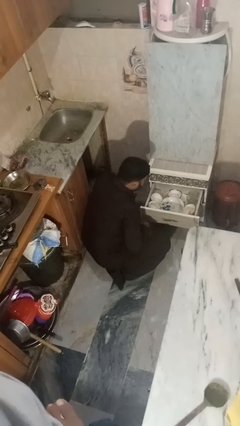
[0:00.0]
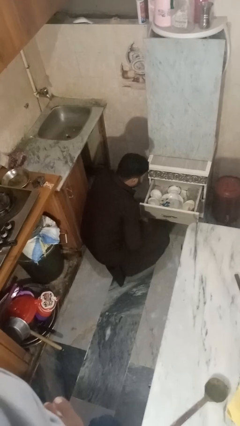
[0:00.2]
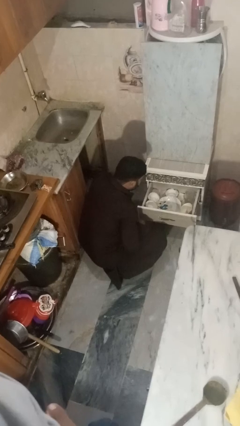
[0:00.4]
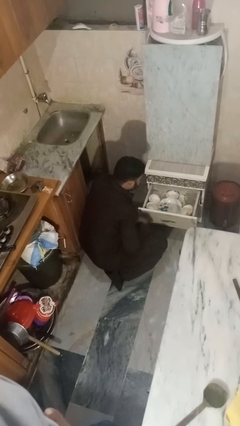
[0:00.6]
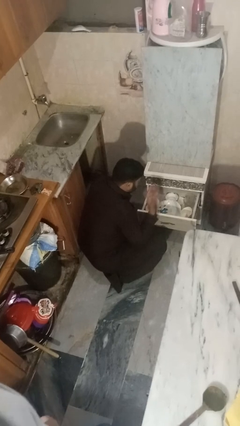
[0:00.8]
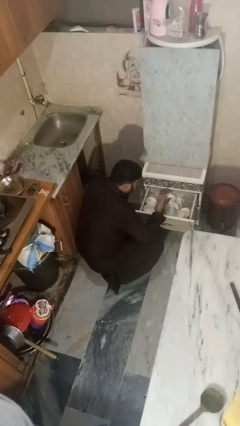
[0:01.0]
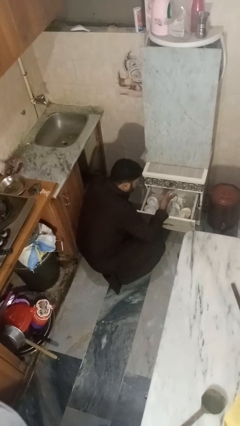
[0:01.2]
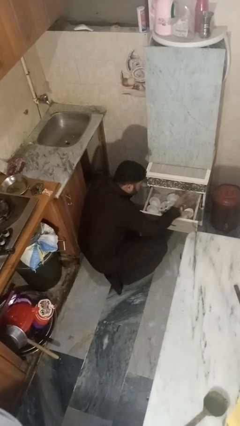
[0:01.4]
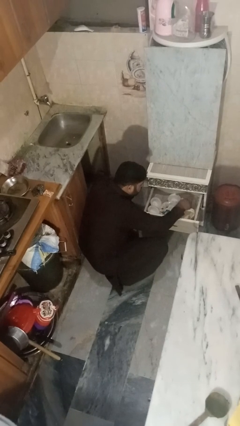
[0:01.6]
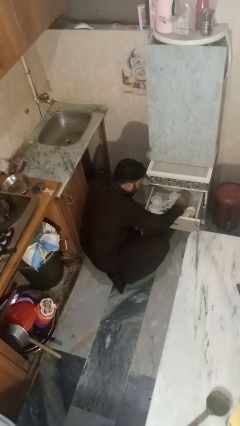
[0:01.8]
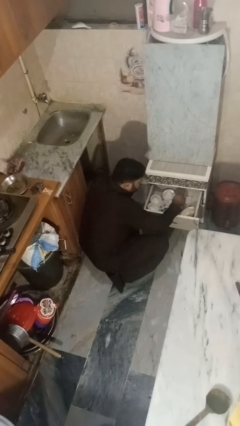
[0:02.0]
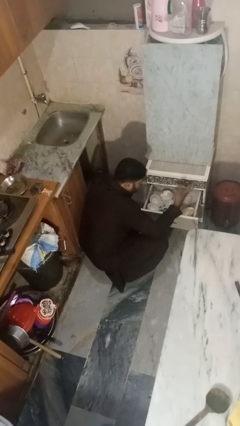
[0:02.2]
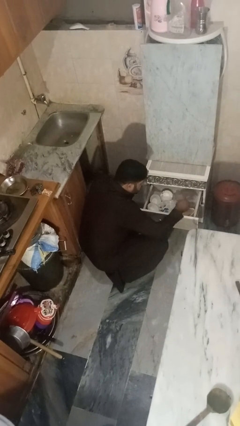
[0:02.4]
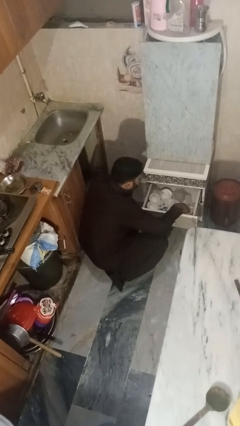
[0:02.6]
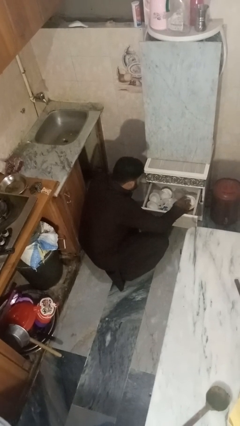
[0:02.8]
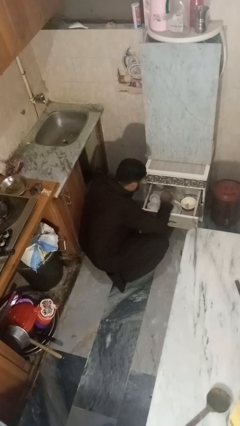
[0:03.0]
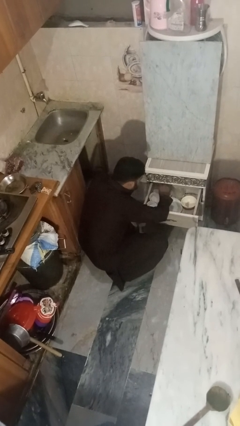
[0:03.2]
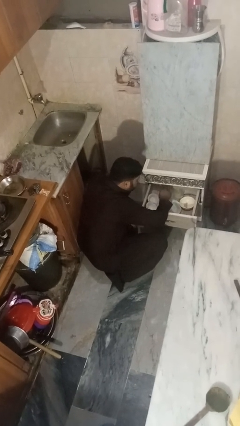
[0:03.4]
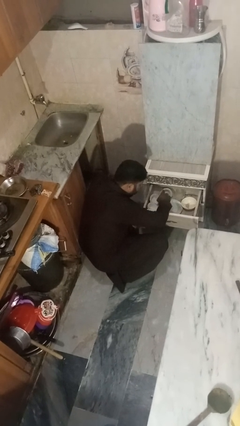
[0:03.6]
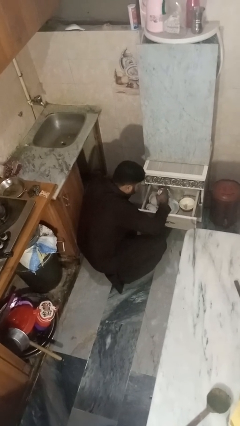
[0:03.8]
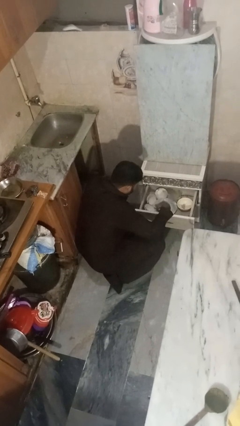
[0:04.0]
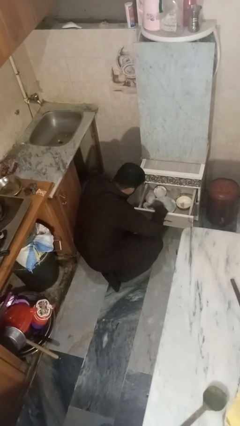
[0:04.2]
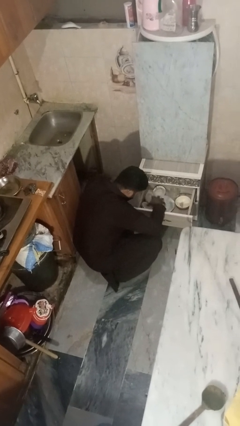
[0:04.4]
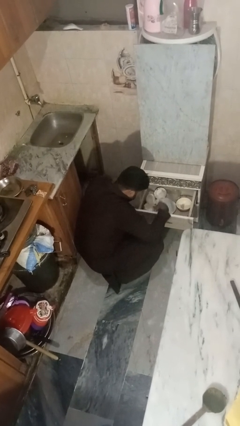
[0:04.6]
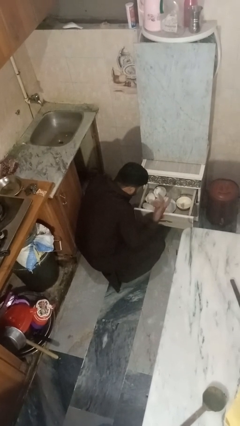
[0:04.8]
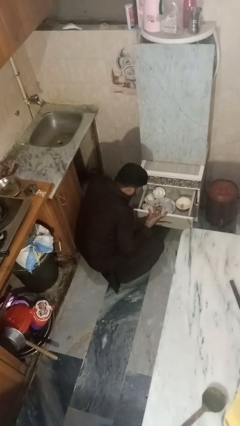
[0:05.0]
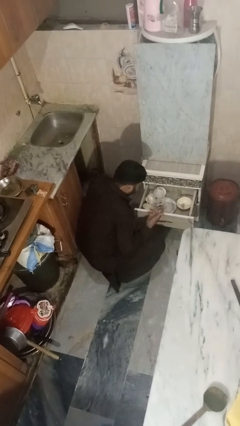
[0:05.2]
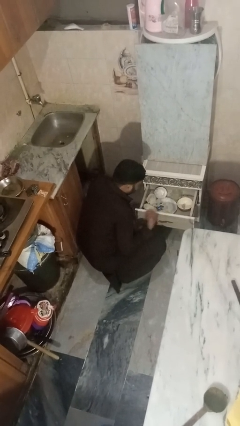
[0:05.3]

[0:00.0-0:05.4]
person searches in kitchen drawer

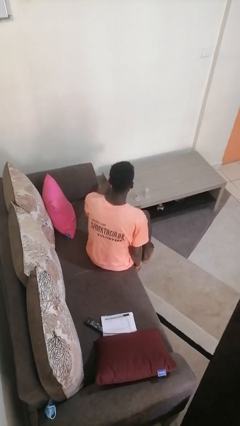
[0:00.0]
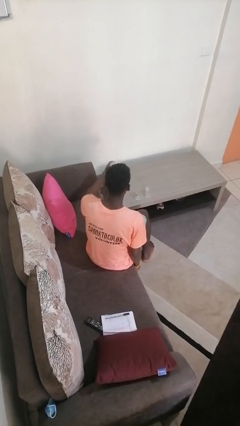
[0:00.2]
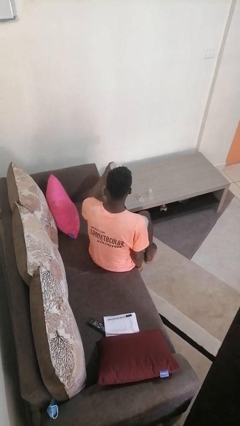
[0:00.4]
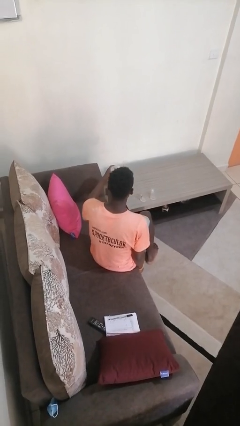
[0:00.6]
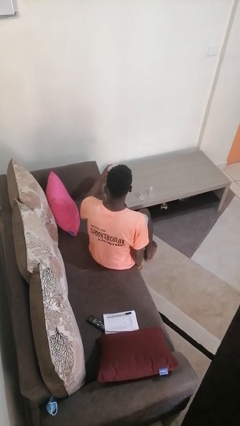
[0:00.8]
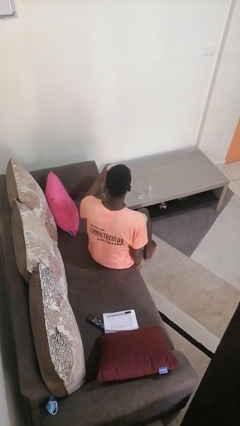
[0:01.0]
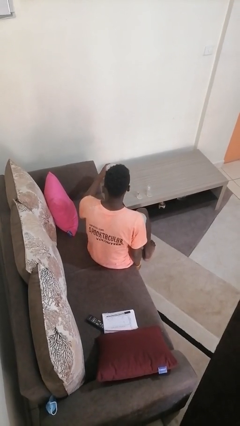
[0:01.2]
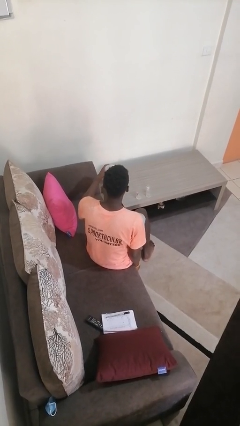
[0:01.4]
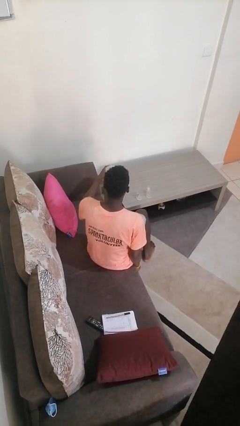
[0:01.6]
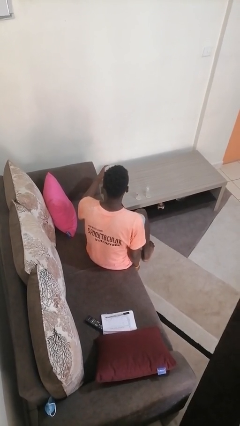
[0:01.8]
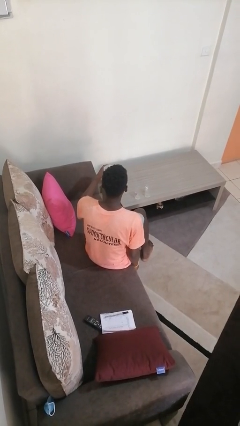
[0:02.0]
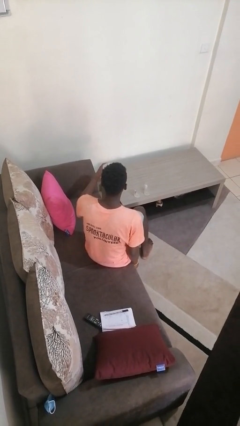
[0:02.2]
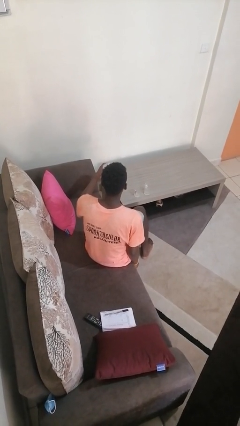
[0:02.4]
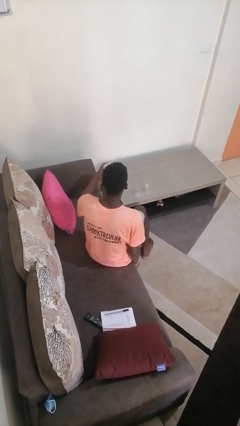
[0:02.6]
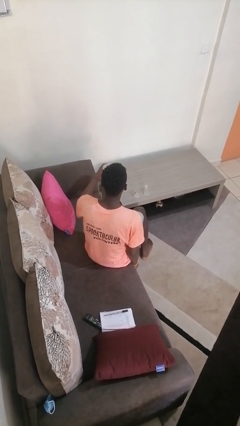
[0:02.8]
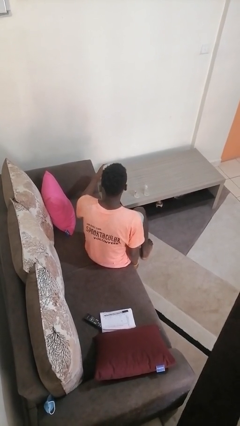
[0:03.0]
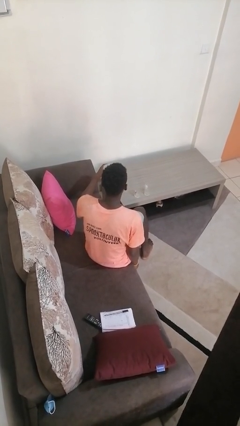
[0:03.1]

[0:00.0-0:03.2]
person picks up object from table

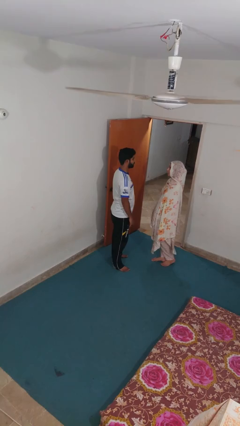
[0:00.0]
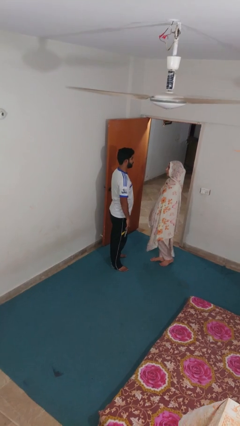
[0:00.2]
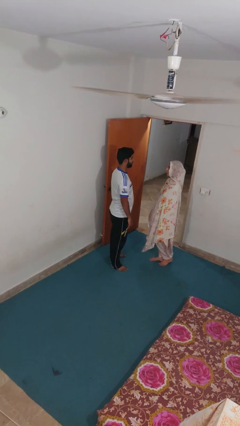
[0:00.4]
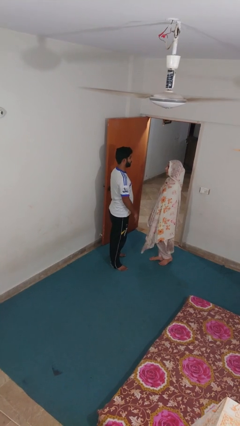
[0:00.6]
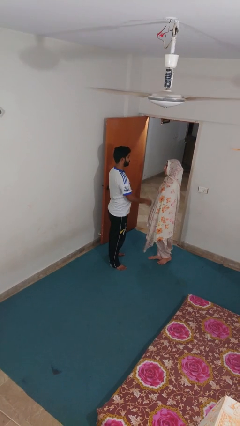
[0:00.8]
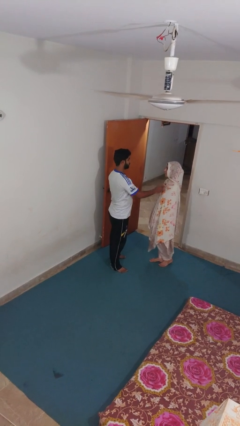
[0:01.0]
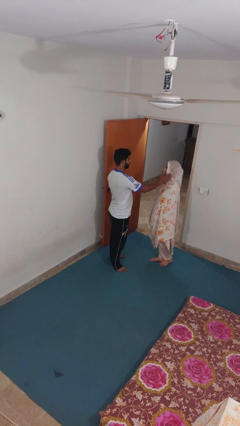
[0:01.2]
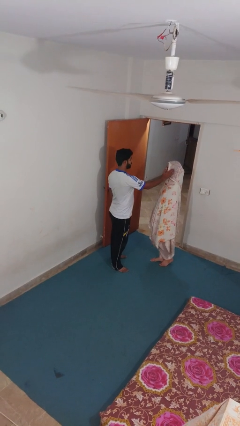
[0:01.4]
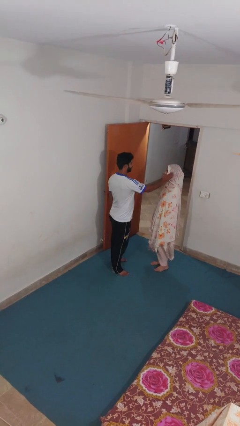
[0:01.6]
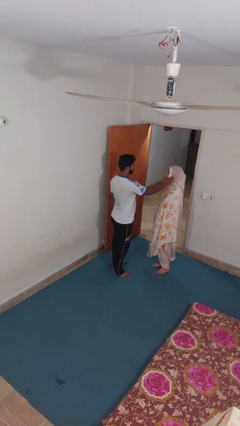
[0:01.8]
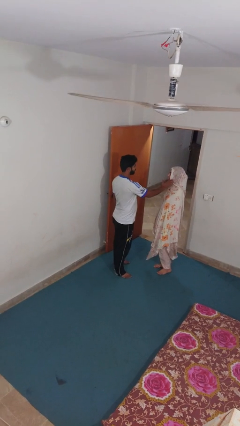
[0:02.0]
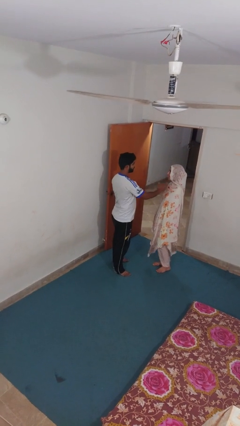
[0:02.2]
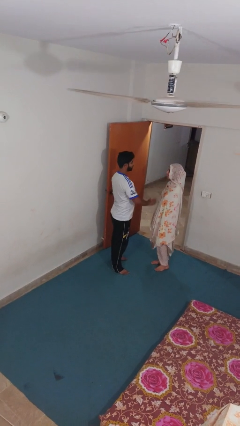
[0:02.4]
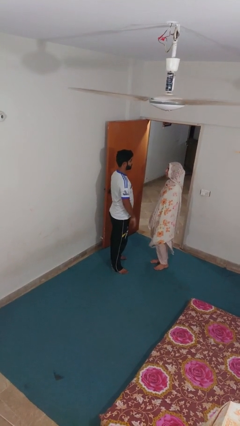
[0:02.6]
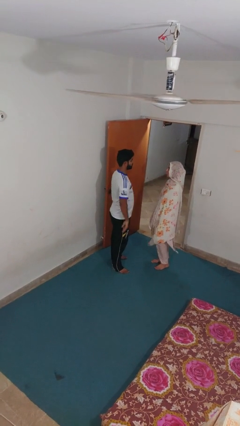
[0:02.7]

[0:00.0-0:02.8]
person touches face of person

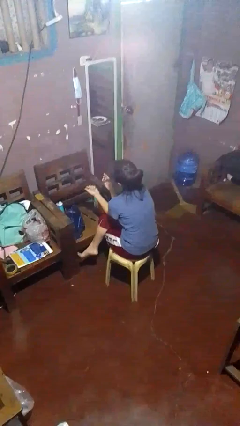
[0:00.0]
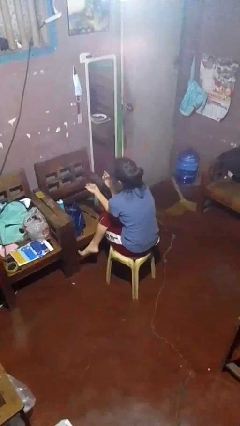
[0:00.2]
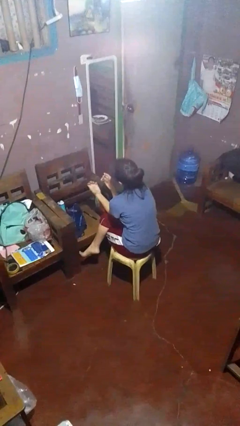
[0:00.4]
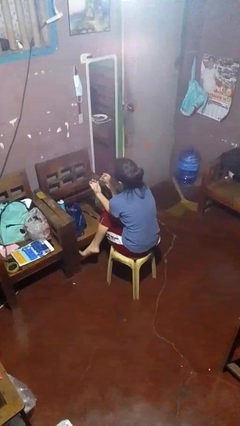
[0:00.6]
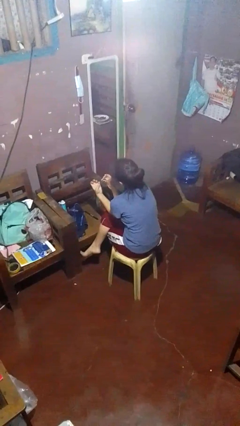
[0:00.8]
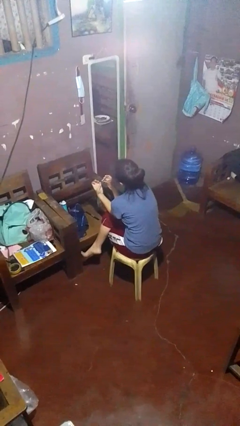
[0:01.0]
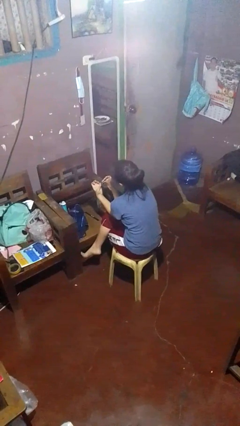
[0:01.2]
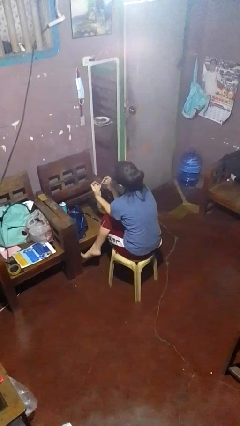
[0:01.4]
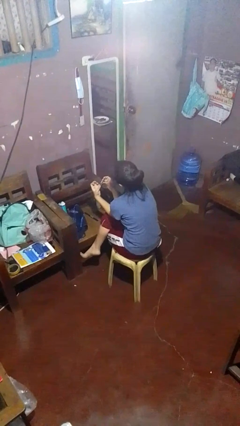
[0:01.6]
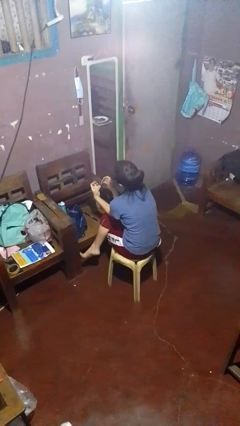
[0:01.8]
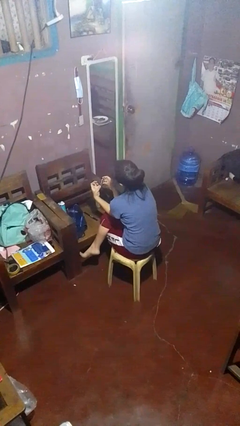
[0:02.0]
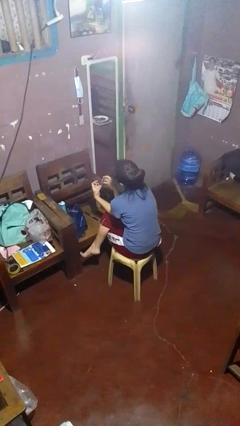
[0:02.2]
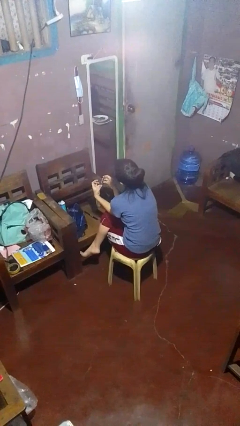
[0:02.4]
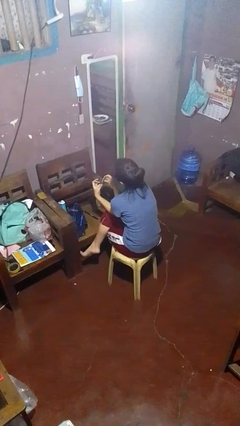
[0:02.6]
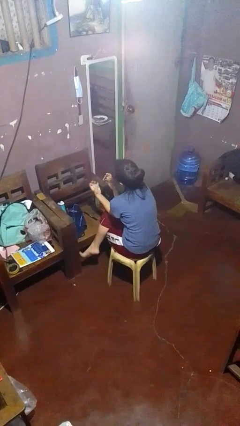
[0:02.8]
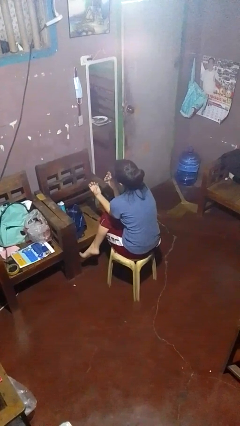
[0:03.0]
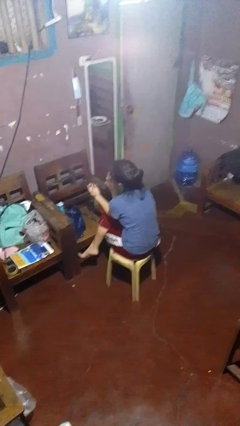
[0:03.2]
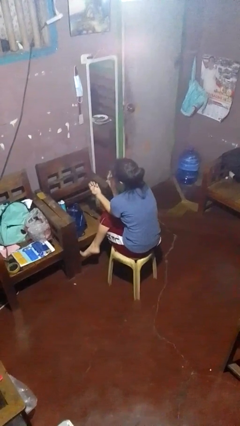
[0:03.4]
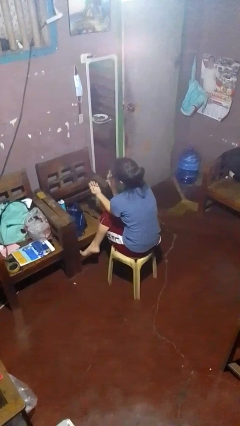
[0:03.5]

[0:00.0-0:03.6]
person clips fingernails

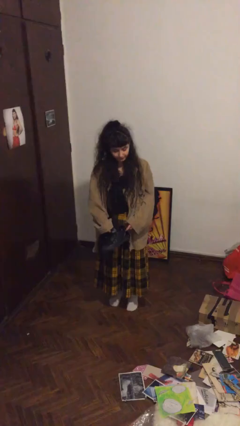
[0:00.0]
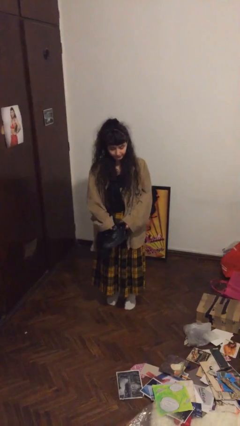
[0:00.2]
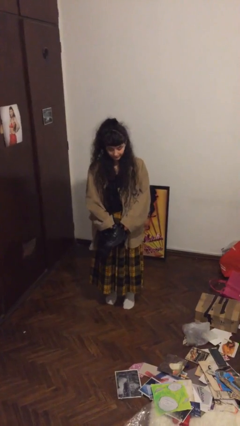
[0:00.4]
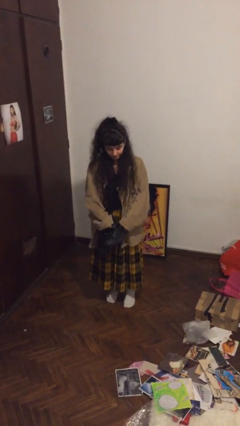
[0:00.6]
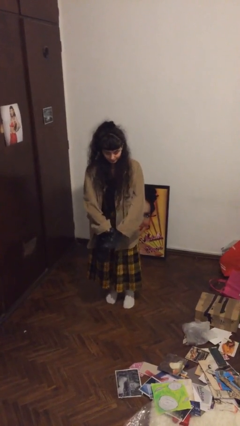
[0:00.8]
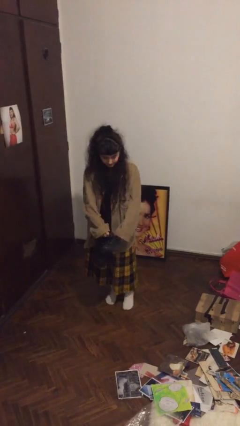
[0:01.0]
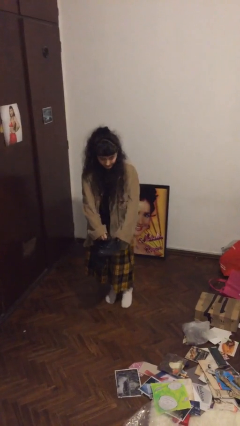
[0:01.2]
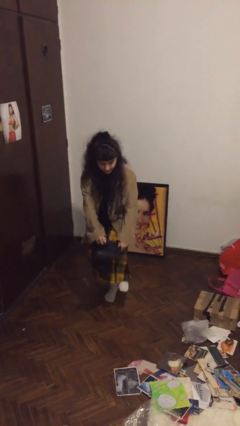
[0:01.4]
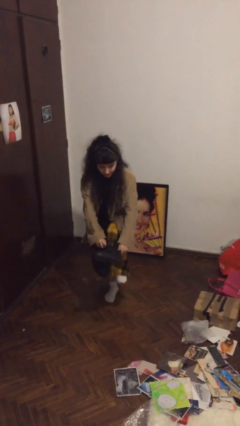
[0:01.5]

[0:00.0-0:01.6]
person puts on shoes

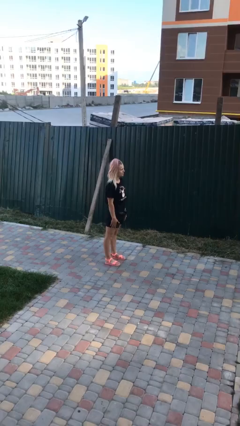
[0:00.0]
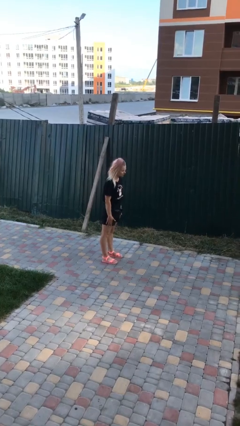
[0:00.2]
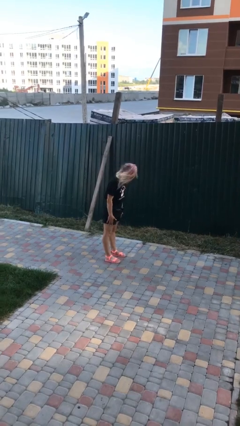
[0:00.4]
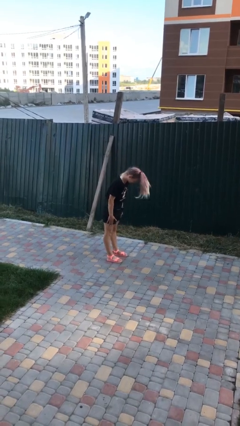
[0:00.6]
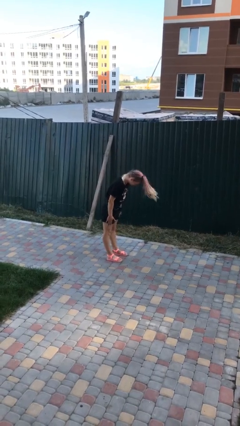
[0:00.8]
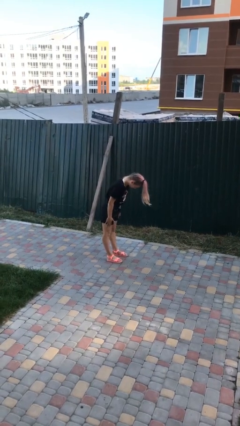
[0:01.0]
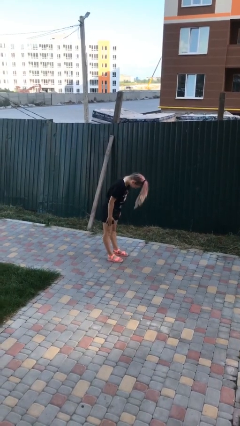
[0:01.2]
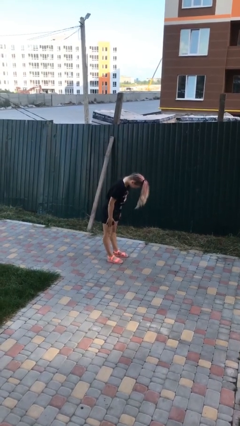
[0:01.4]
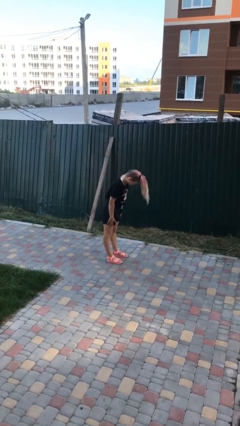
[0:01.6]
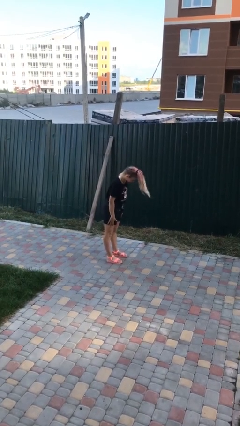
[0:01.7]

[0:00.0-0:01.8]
person bows
